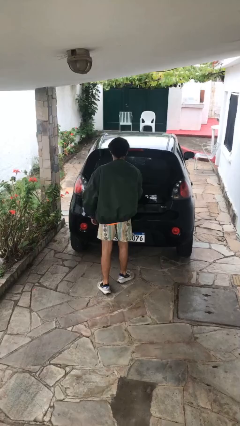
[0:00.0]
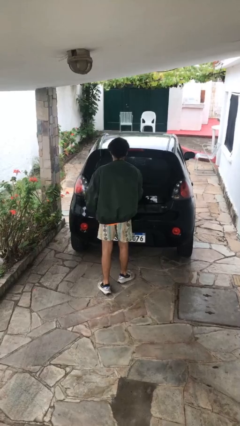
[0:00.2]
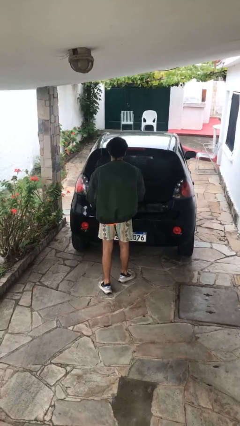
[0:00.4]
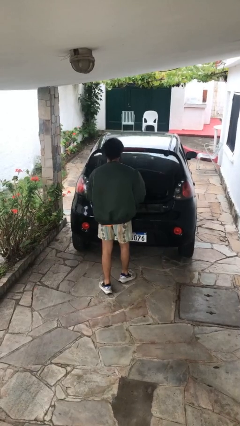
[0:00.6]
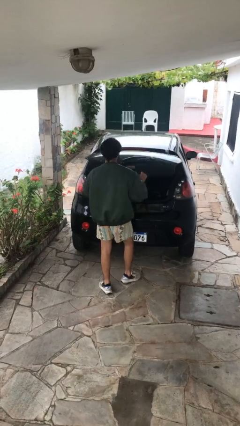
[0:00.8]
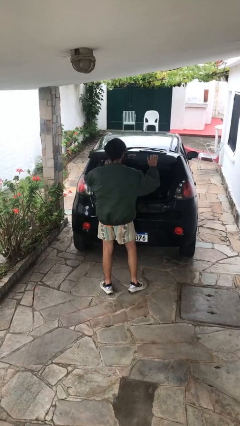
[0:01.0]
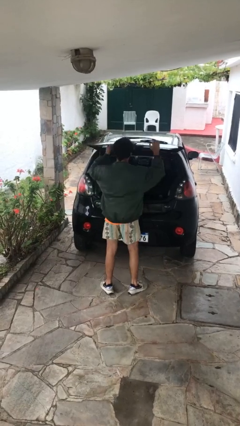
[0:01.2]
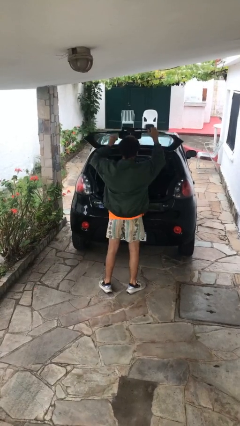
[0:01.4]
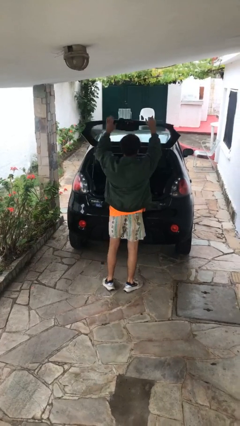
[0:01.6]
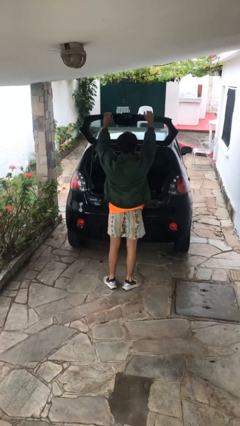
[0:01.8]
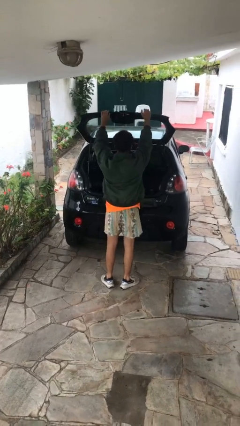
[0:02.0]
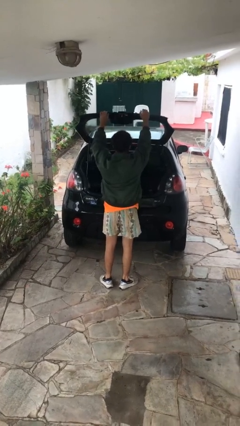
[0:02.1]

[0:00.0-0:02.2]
person opens car trunk

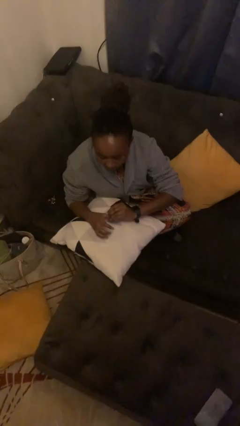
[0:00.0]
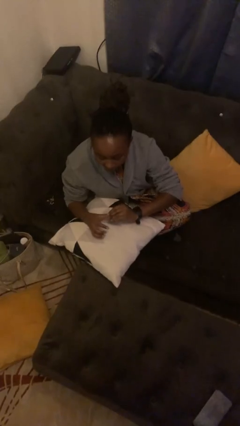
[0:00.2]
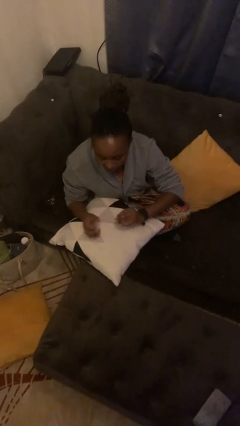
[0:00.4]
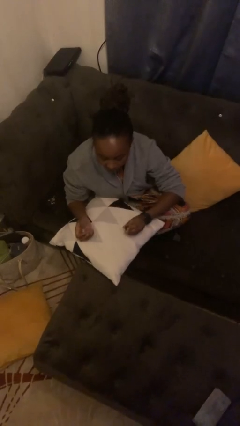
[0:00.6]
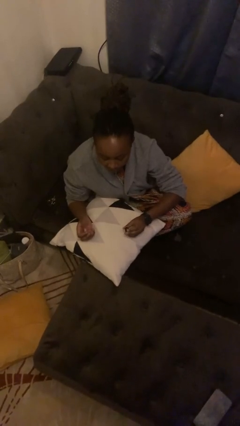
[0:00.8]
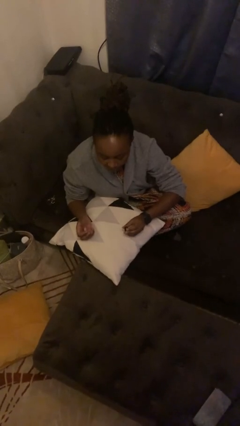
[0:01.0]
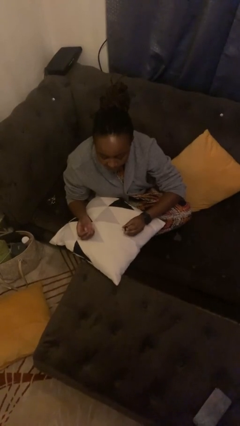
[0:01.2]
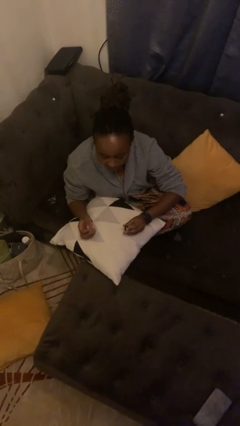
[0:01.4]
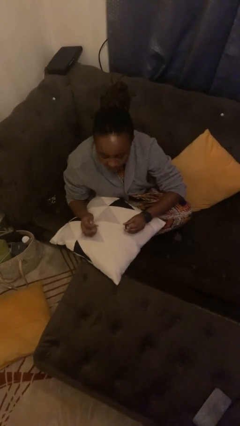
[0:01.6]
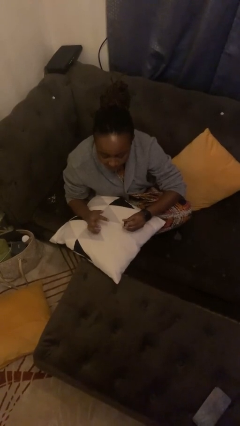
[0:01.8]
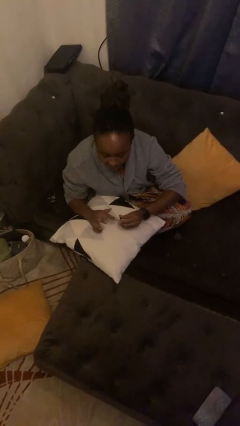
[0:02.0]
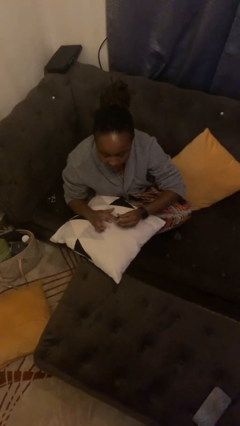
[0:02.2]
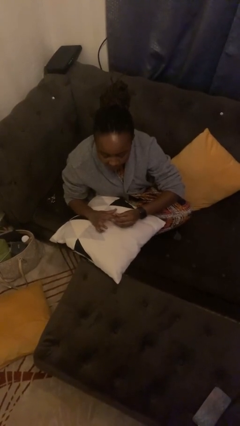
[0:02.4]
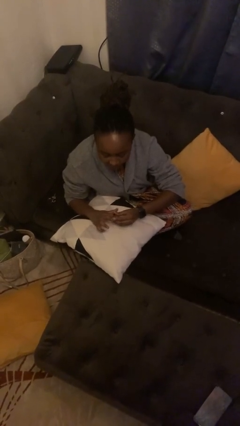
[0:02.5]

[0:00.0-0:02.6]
person takes off ring

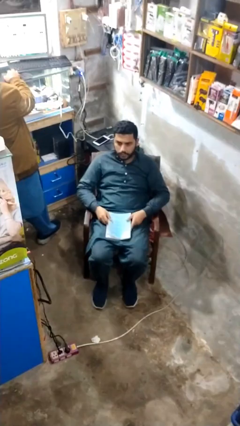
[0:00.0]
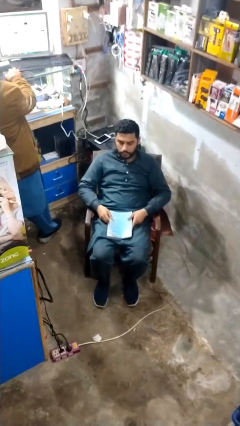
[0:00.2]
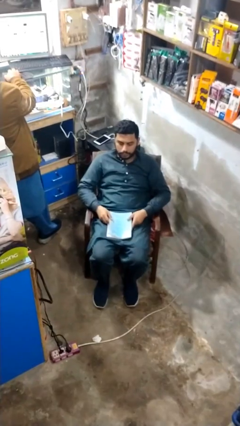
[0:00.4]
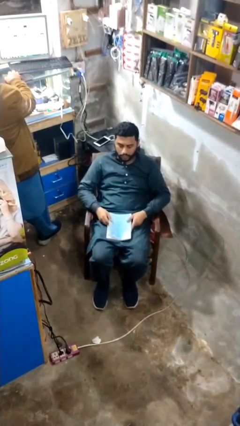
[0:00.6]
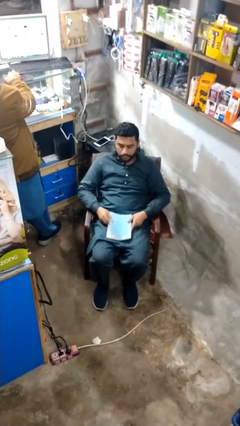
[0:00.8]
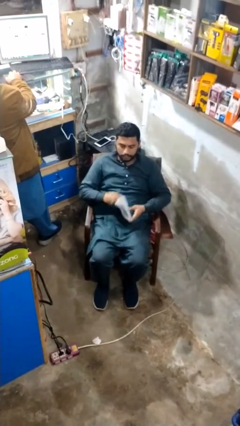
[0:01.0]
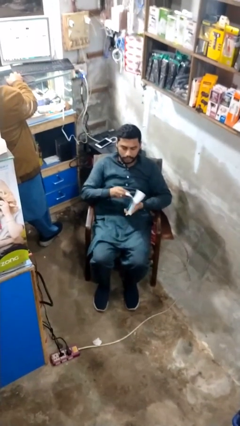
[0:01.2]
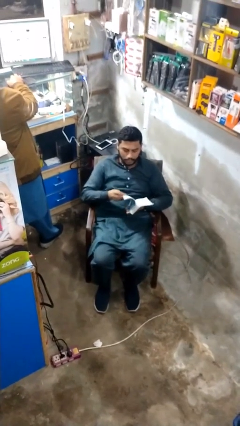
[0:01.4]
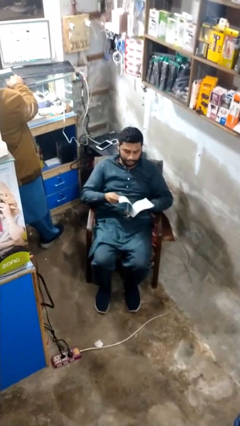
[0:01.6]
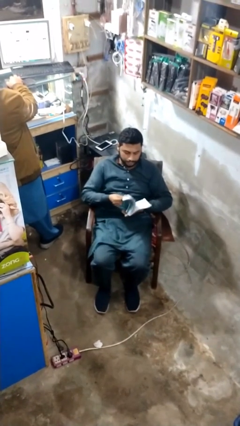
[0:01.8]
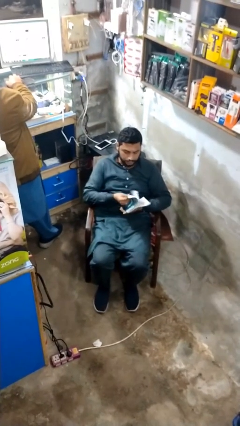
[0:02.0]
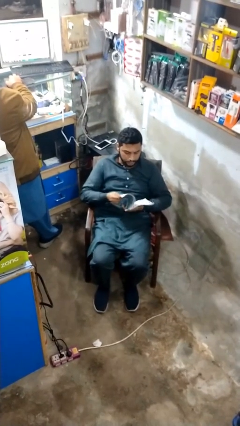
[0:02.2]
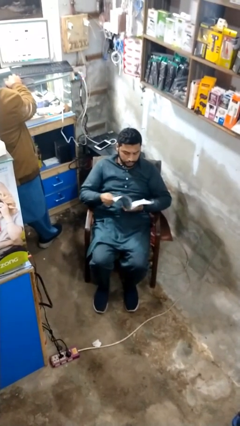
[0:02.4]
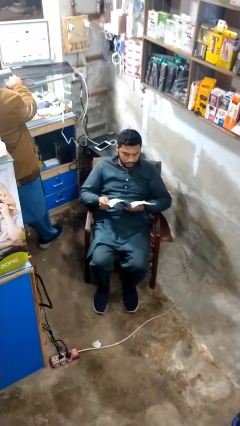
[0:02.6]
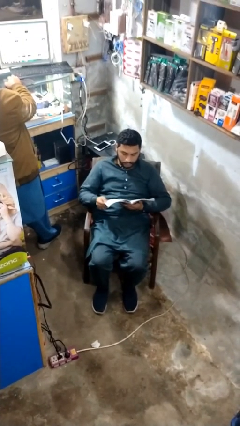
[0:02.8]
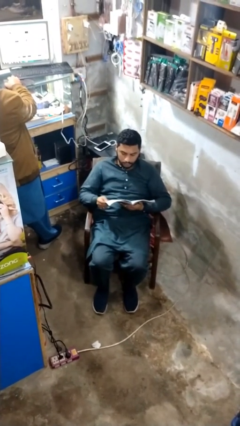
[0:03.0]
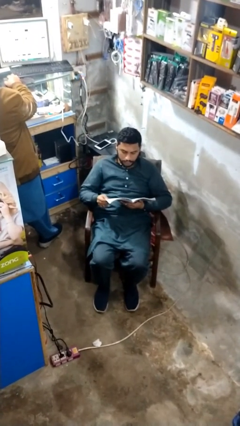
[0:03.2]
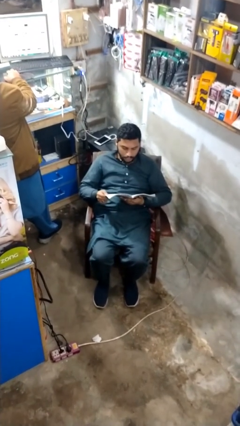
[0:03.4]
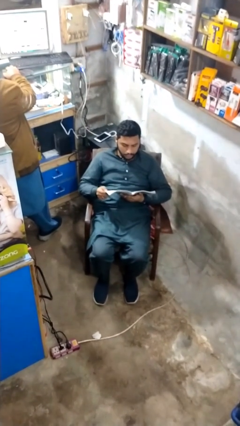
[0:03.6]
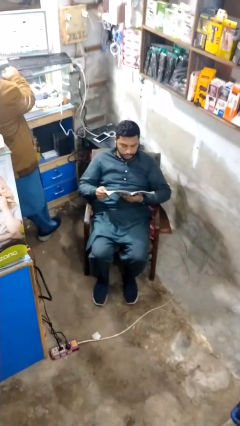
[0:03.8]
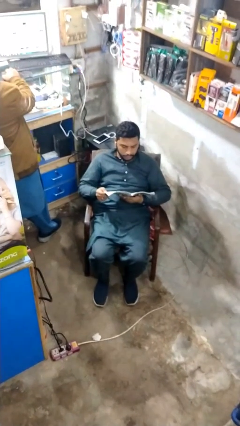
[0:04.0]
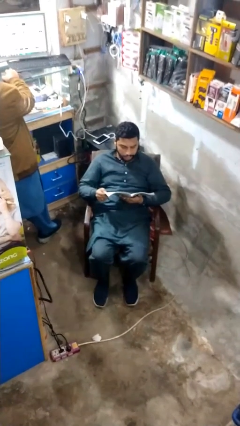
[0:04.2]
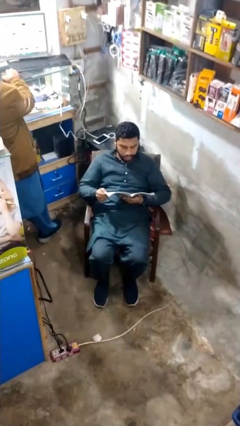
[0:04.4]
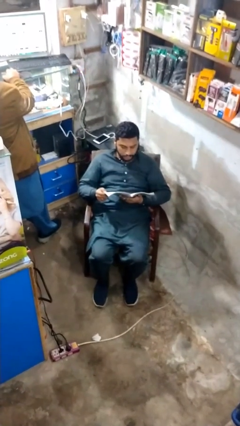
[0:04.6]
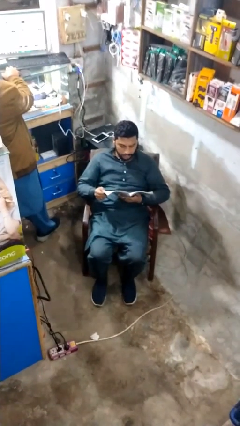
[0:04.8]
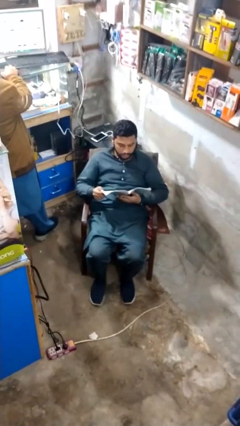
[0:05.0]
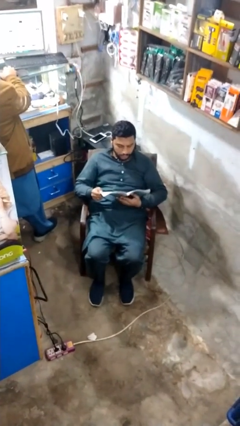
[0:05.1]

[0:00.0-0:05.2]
person reads document

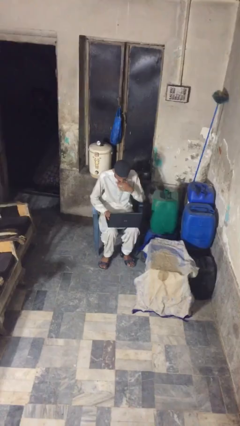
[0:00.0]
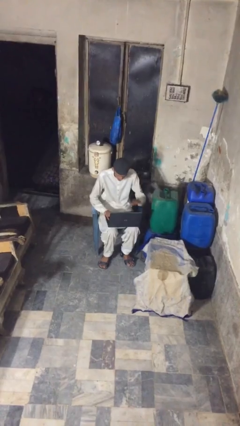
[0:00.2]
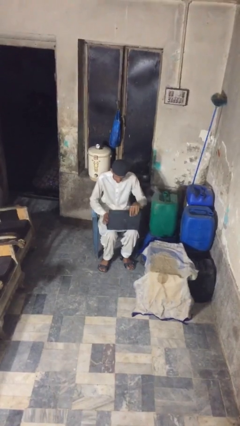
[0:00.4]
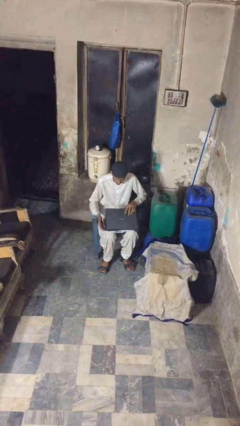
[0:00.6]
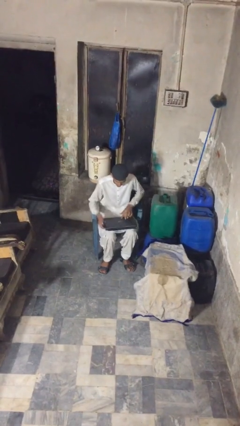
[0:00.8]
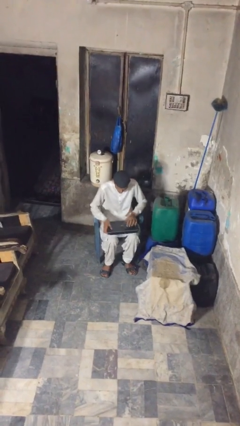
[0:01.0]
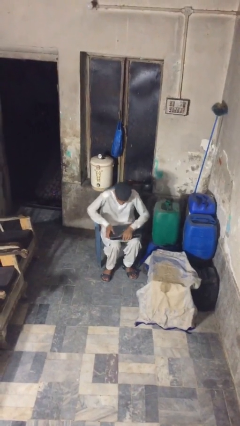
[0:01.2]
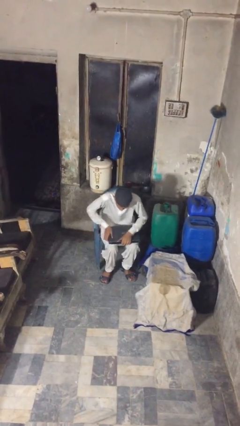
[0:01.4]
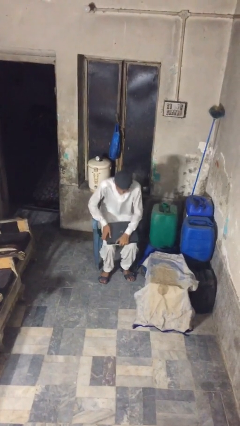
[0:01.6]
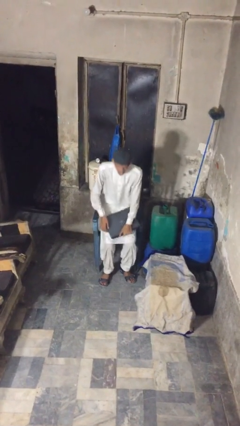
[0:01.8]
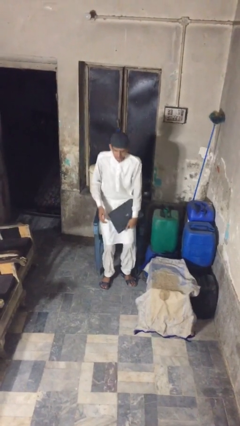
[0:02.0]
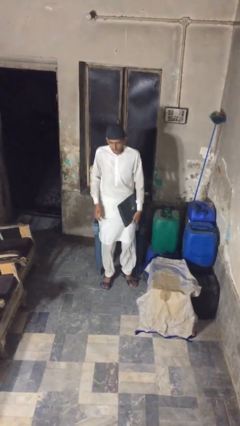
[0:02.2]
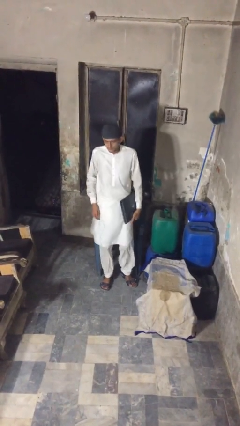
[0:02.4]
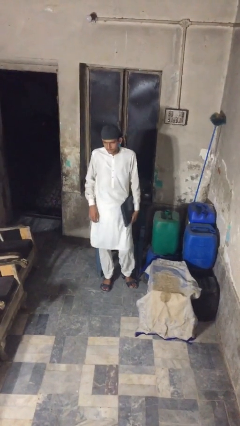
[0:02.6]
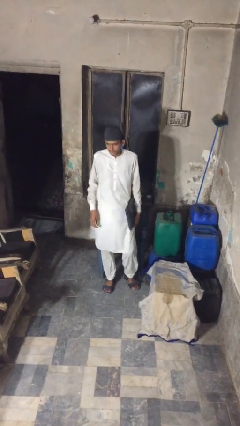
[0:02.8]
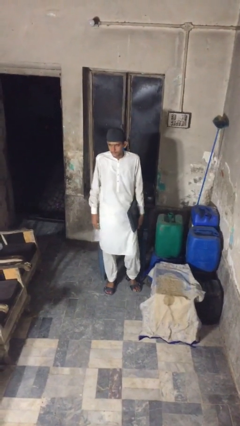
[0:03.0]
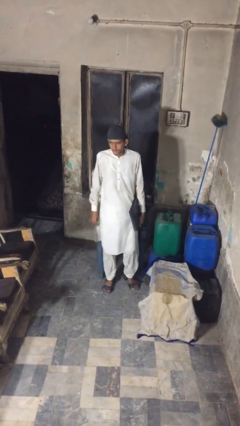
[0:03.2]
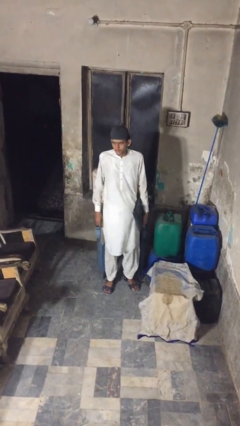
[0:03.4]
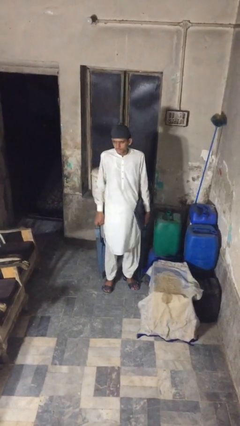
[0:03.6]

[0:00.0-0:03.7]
person stands up

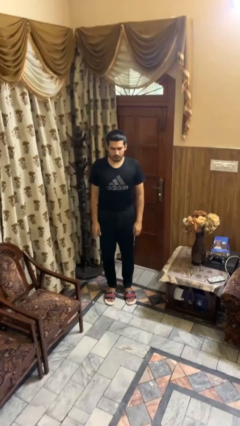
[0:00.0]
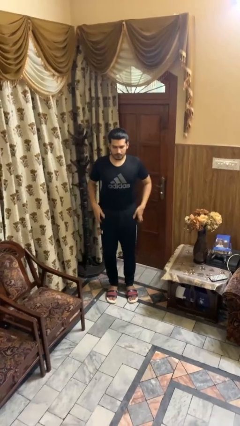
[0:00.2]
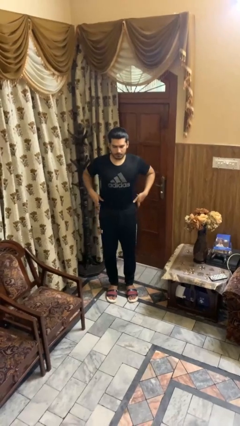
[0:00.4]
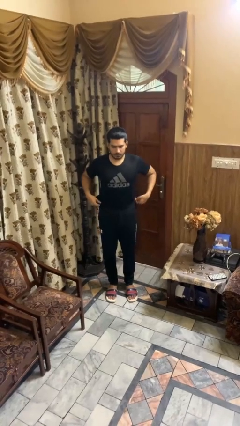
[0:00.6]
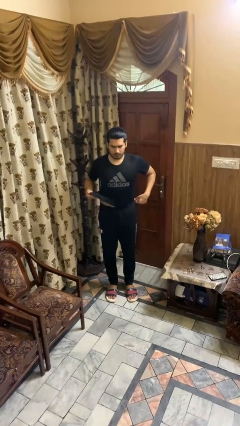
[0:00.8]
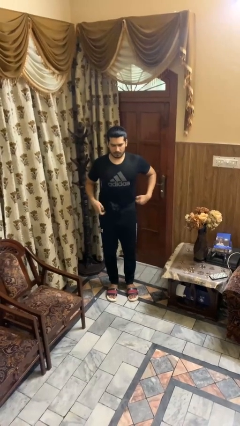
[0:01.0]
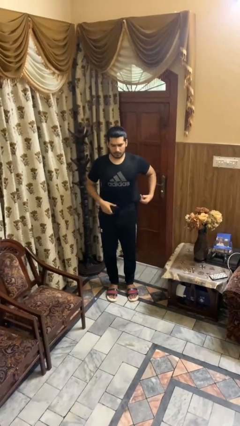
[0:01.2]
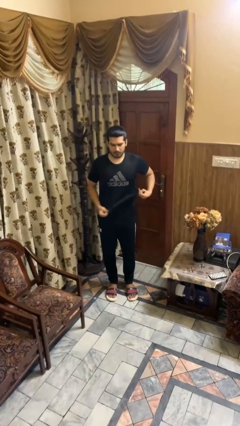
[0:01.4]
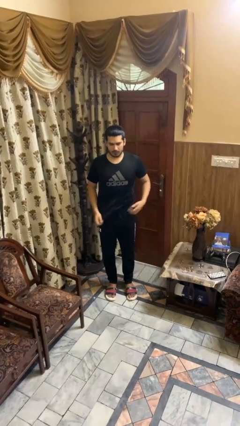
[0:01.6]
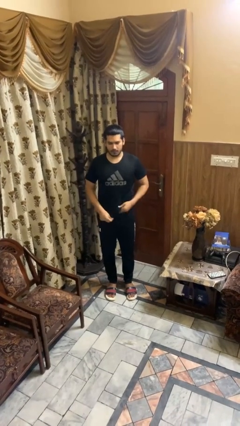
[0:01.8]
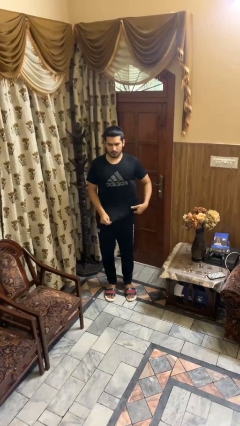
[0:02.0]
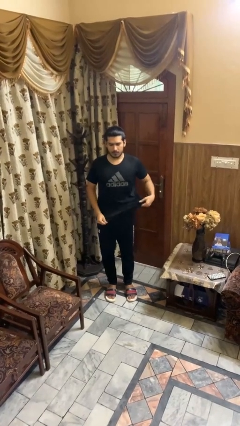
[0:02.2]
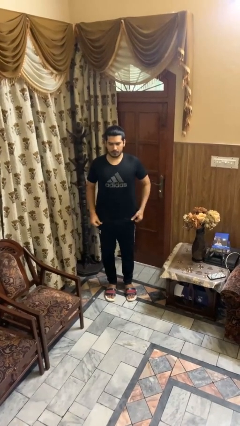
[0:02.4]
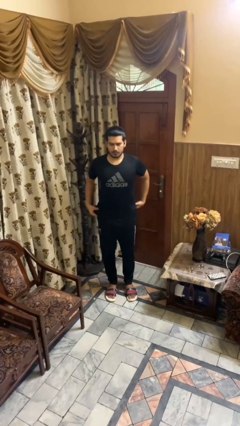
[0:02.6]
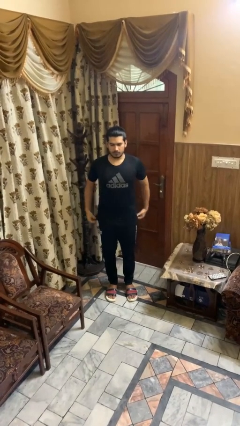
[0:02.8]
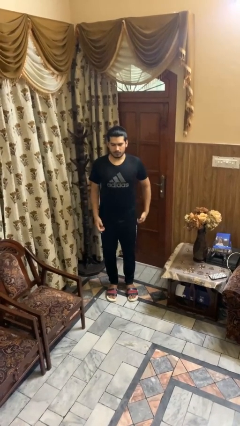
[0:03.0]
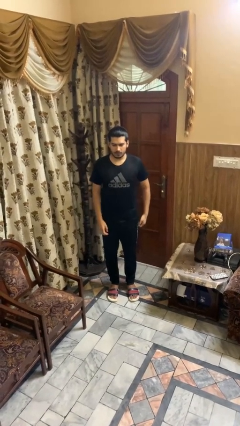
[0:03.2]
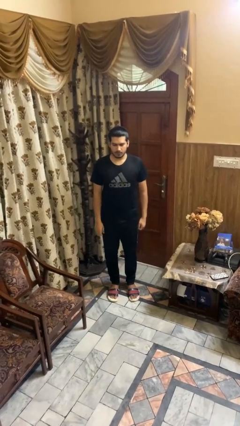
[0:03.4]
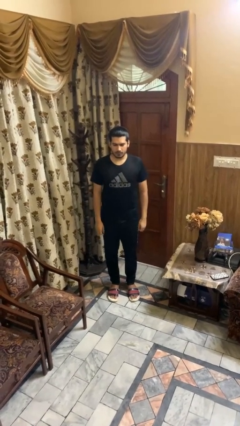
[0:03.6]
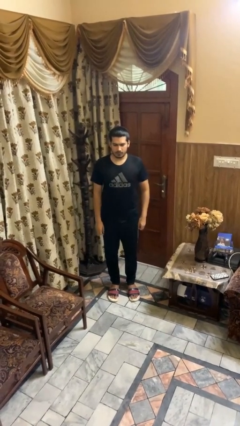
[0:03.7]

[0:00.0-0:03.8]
person untucks shirt

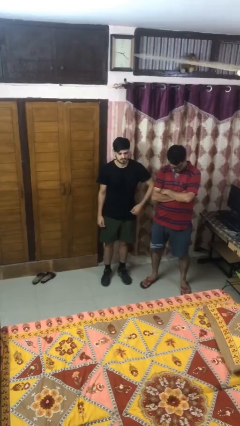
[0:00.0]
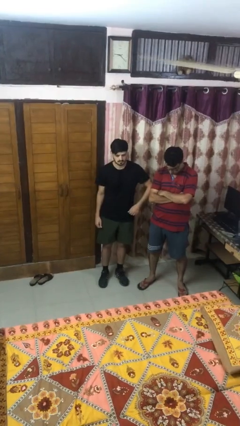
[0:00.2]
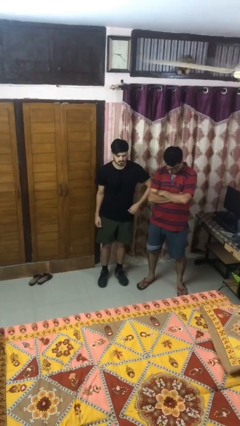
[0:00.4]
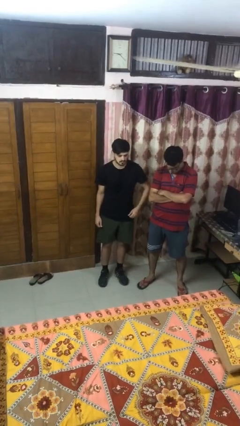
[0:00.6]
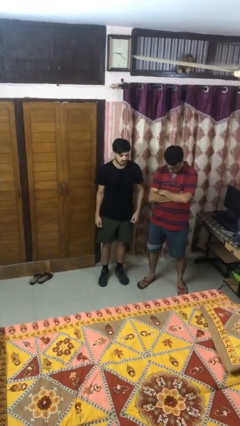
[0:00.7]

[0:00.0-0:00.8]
person nudges person with elbow
